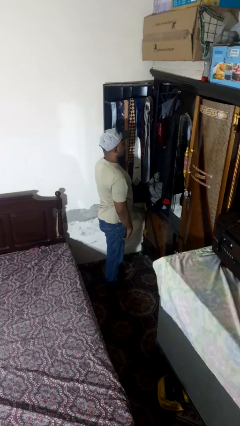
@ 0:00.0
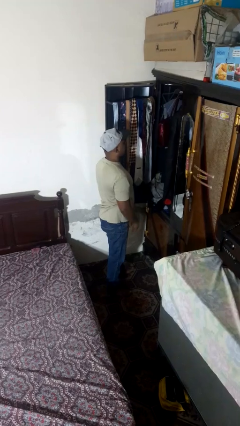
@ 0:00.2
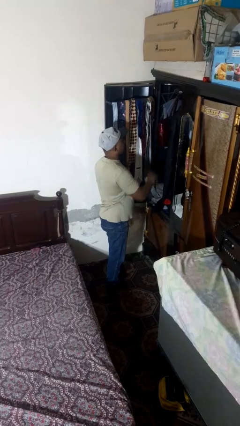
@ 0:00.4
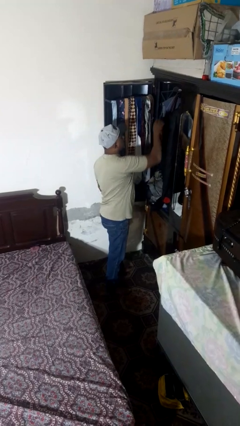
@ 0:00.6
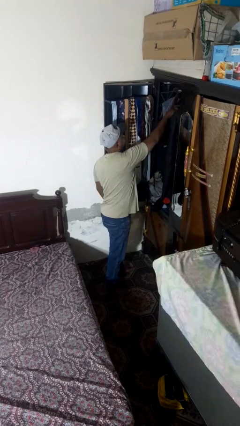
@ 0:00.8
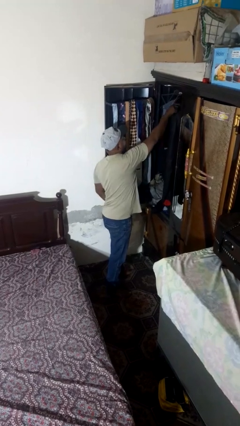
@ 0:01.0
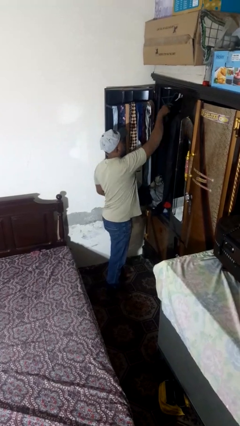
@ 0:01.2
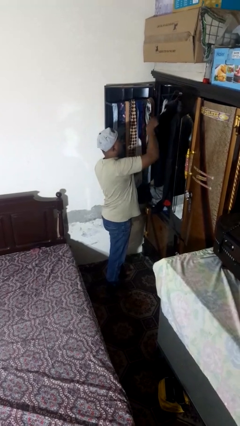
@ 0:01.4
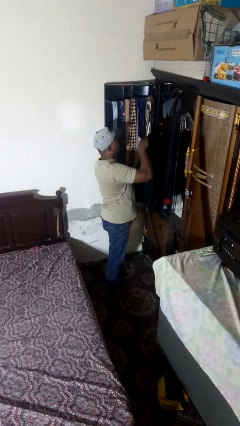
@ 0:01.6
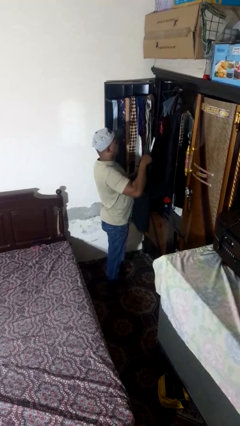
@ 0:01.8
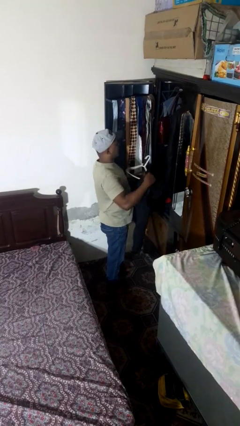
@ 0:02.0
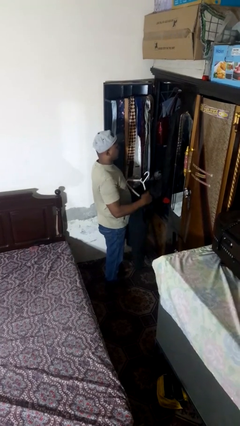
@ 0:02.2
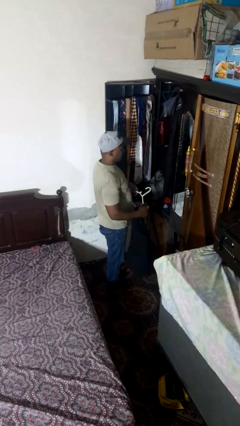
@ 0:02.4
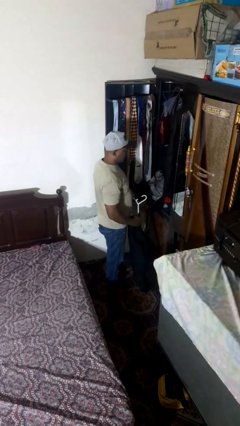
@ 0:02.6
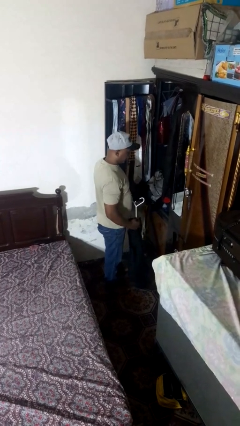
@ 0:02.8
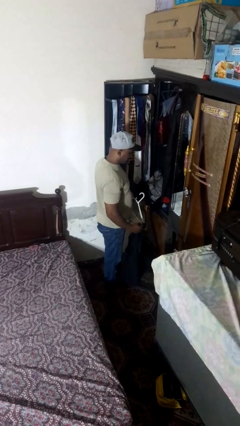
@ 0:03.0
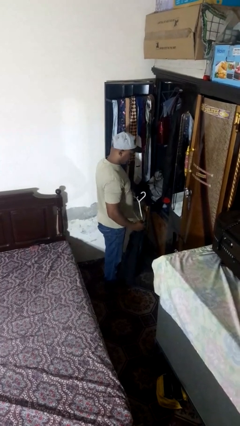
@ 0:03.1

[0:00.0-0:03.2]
person takes clothes from closet

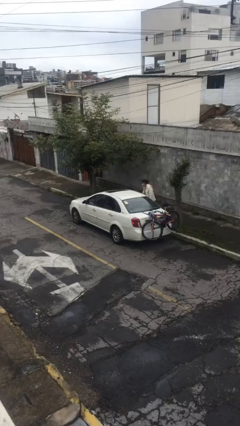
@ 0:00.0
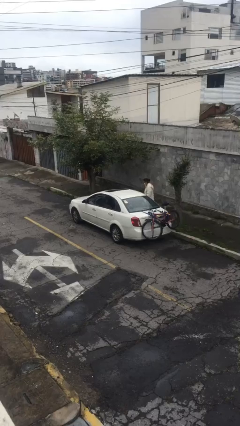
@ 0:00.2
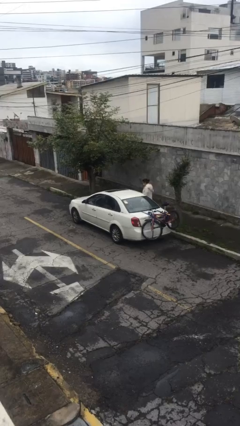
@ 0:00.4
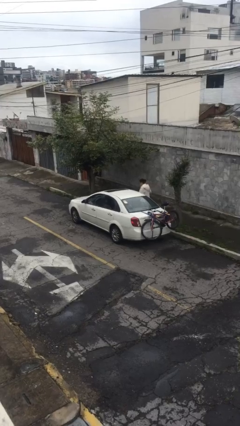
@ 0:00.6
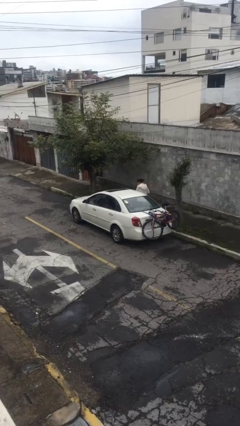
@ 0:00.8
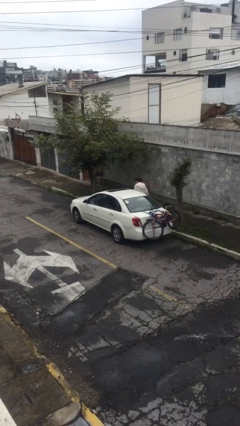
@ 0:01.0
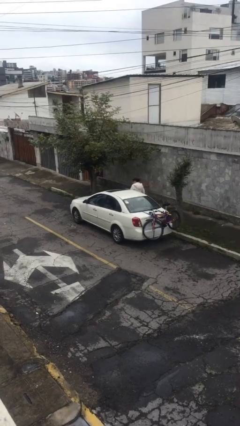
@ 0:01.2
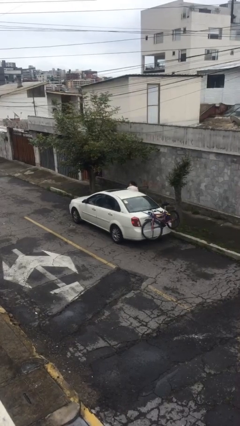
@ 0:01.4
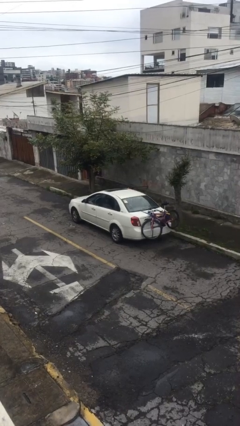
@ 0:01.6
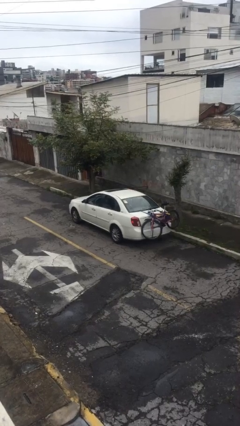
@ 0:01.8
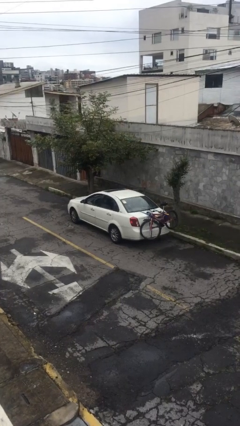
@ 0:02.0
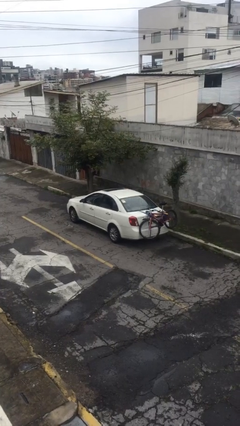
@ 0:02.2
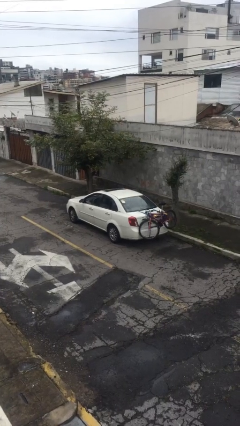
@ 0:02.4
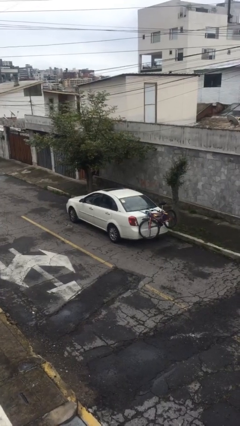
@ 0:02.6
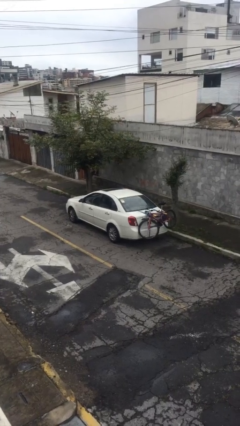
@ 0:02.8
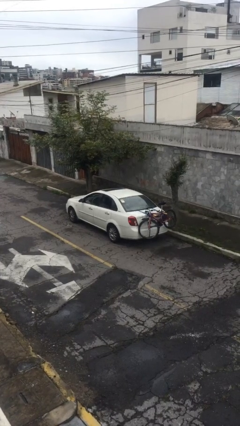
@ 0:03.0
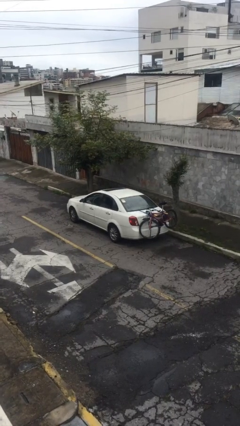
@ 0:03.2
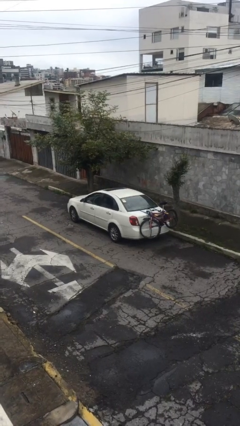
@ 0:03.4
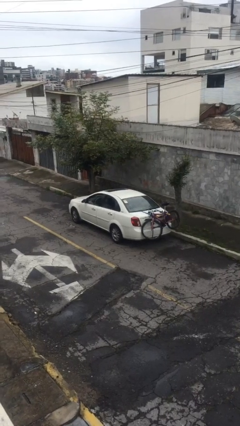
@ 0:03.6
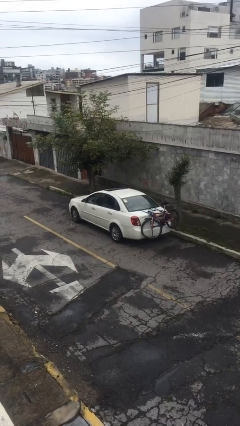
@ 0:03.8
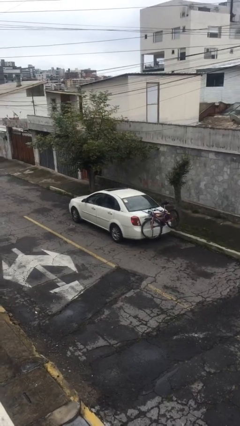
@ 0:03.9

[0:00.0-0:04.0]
car picks up person

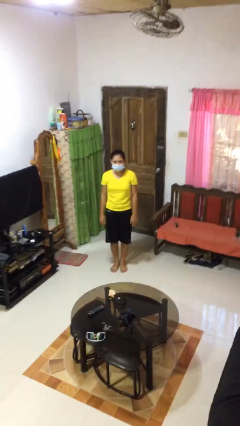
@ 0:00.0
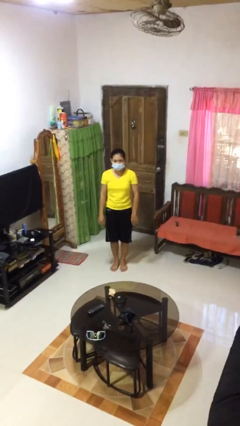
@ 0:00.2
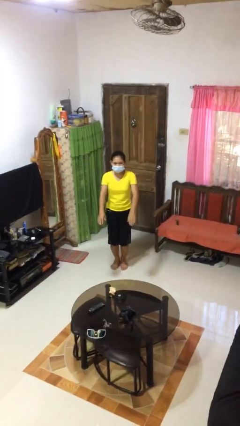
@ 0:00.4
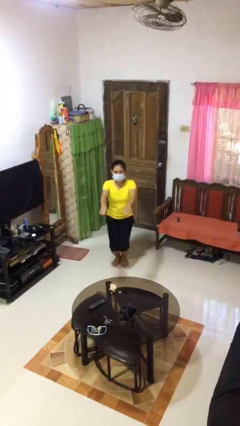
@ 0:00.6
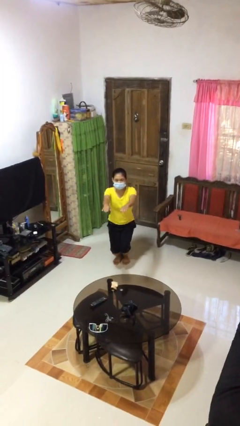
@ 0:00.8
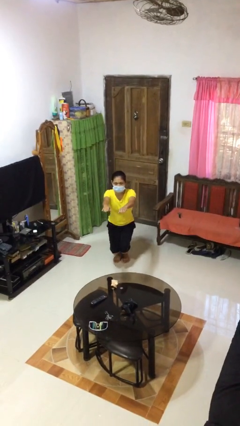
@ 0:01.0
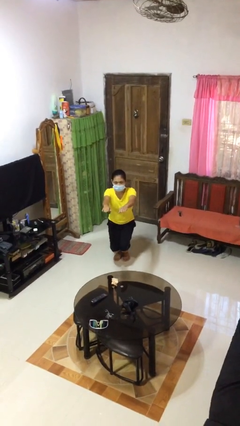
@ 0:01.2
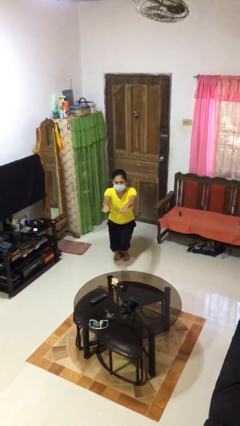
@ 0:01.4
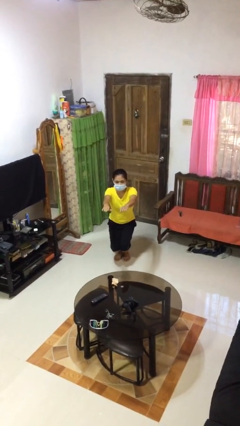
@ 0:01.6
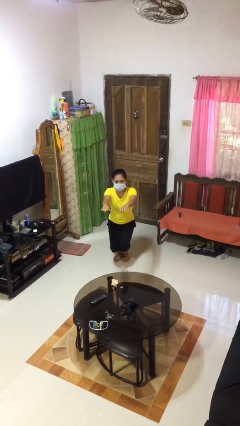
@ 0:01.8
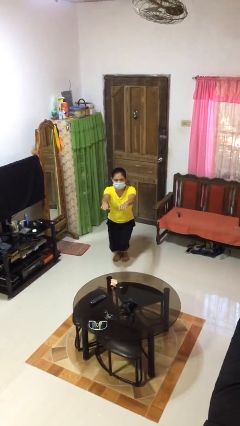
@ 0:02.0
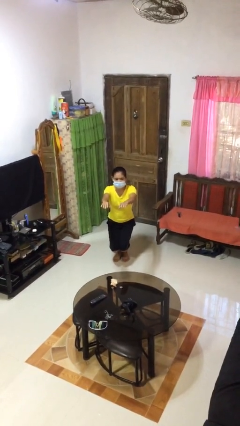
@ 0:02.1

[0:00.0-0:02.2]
person squats

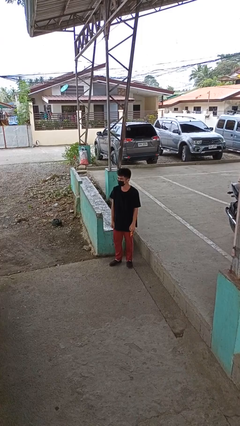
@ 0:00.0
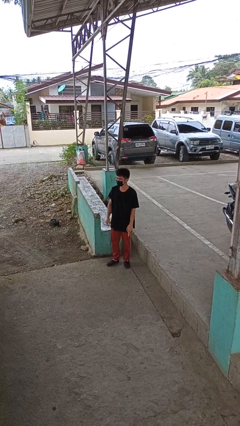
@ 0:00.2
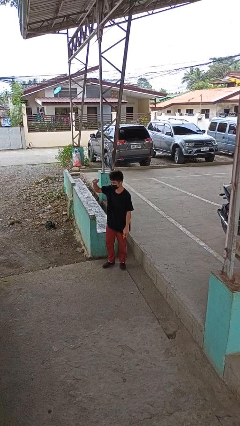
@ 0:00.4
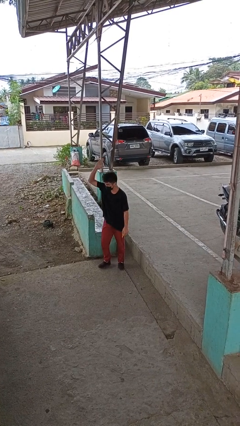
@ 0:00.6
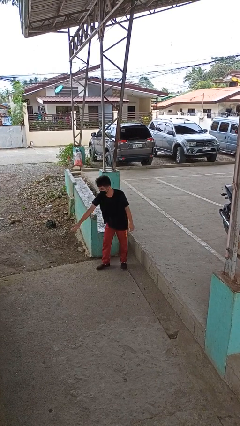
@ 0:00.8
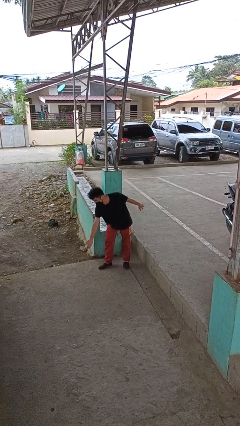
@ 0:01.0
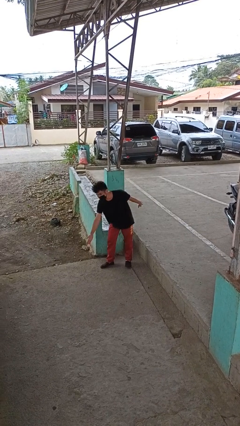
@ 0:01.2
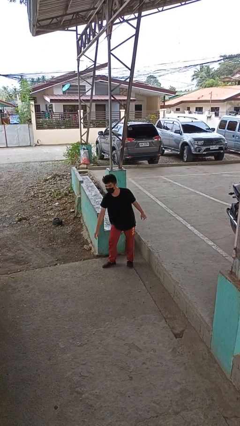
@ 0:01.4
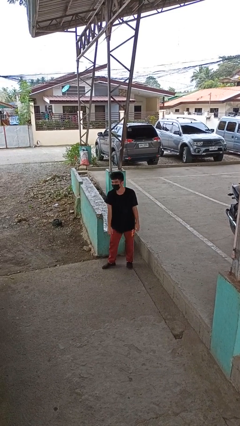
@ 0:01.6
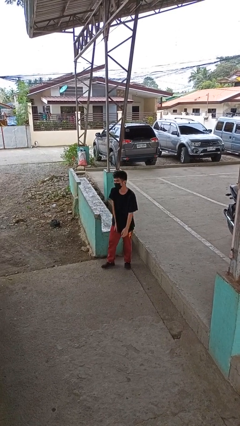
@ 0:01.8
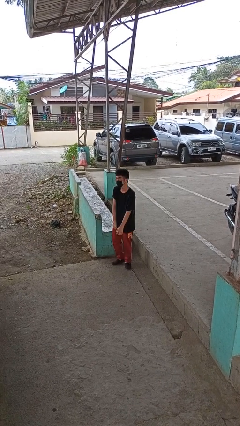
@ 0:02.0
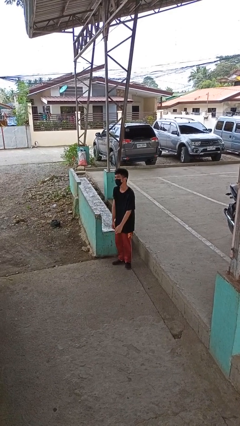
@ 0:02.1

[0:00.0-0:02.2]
person karate chop

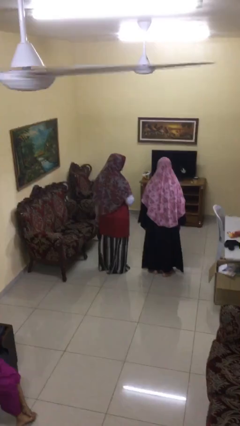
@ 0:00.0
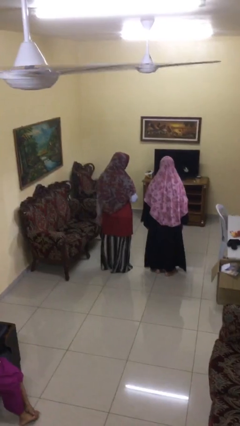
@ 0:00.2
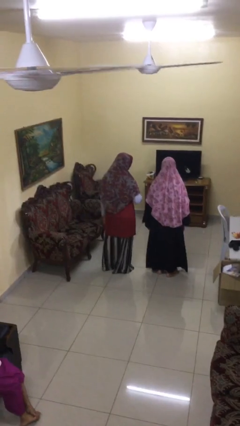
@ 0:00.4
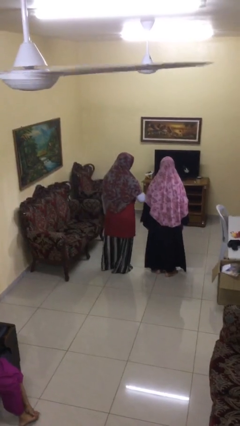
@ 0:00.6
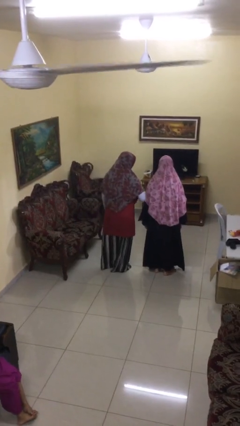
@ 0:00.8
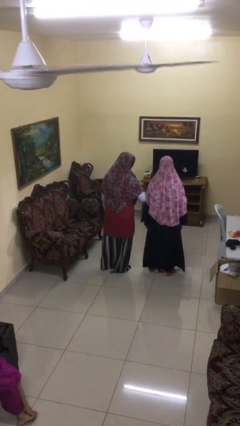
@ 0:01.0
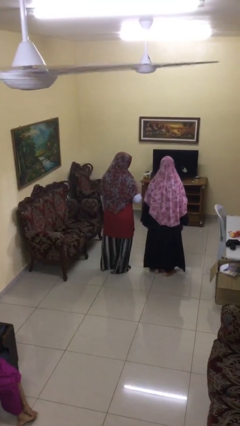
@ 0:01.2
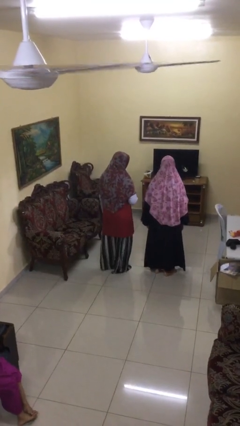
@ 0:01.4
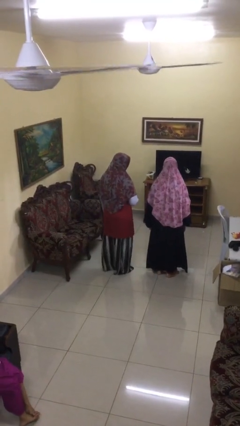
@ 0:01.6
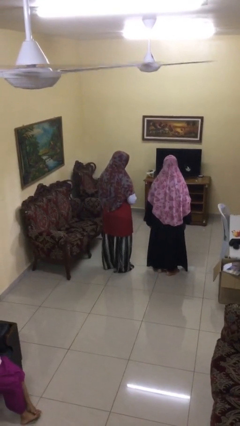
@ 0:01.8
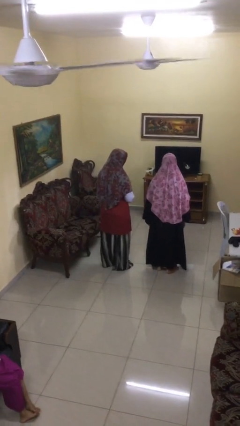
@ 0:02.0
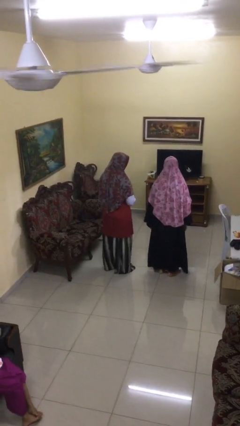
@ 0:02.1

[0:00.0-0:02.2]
person nudges person with elbow

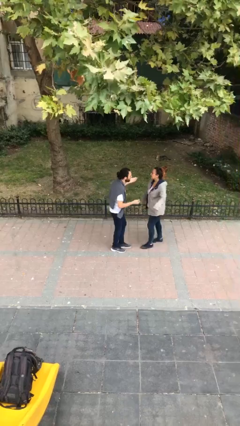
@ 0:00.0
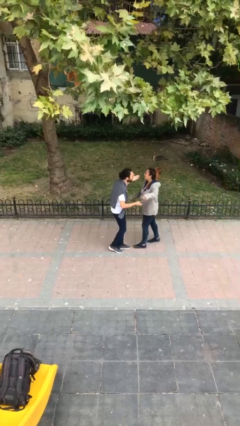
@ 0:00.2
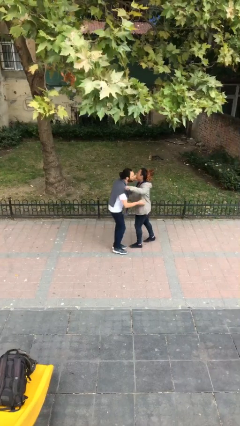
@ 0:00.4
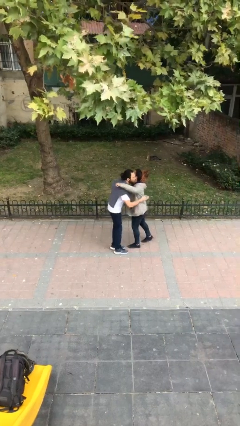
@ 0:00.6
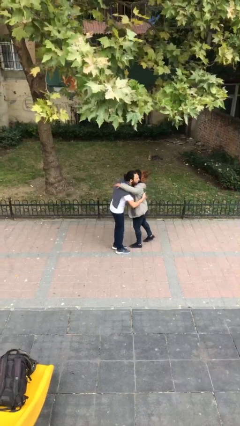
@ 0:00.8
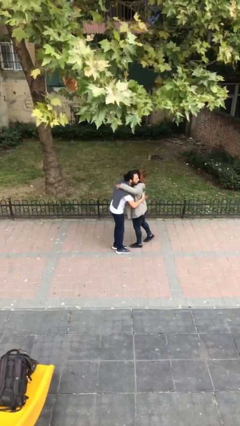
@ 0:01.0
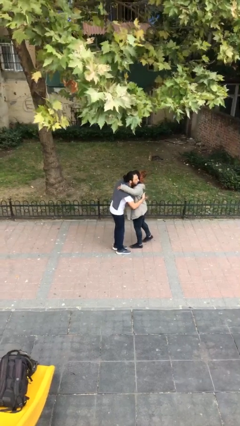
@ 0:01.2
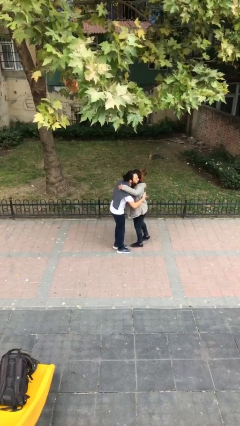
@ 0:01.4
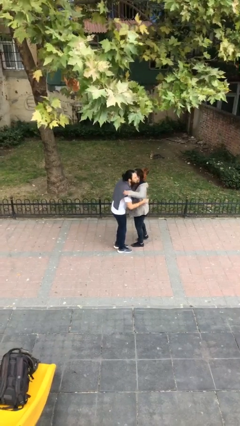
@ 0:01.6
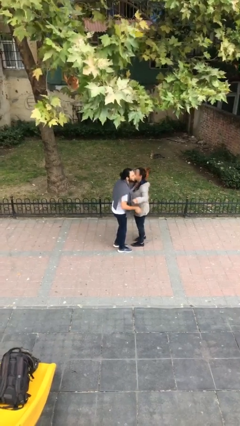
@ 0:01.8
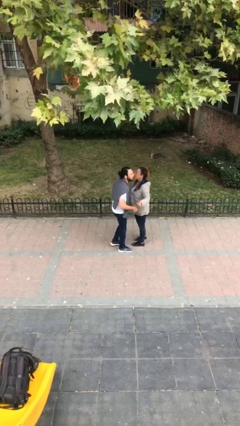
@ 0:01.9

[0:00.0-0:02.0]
person embraces person

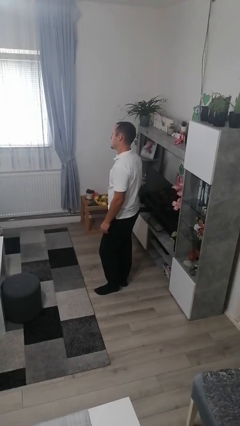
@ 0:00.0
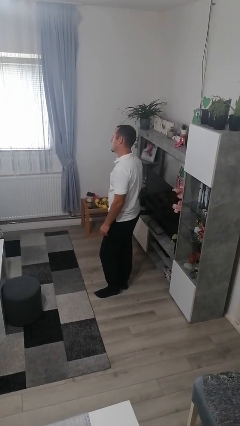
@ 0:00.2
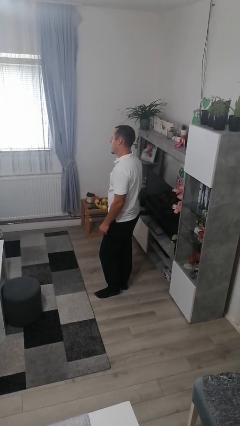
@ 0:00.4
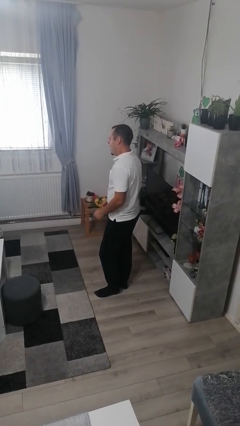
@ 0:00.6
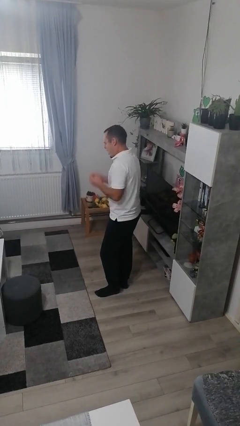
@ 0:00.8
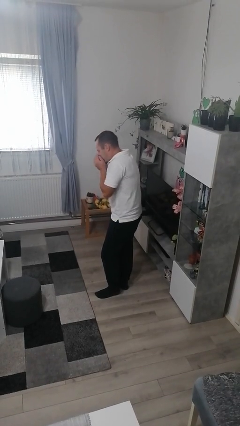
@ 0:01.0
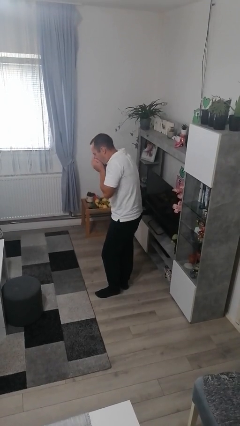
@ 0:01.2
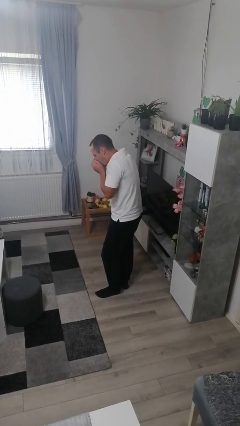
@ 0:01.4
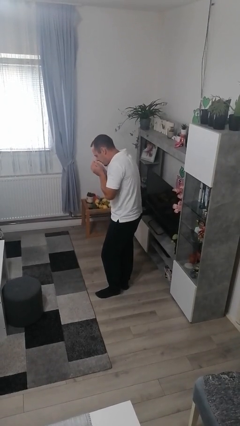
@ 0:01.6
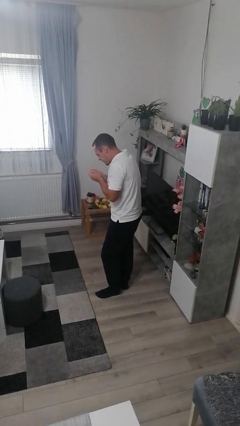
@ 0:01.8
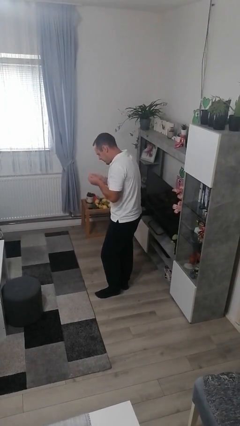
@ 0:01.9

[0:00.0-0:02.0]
person sneezes into hand
